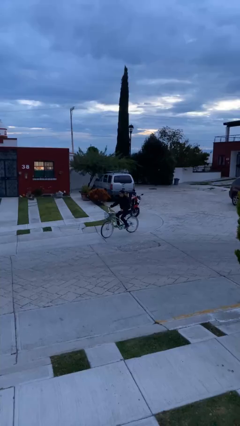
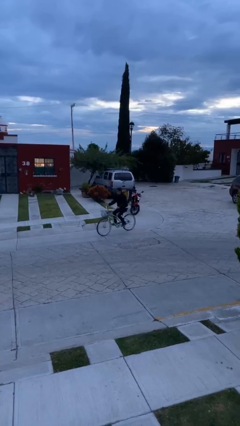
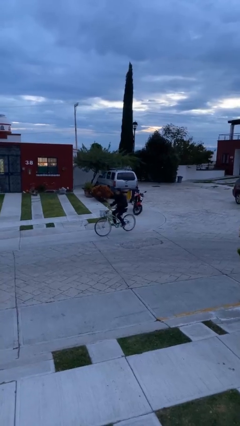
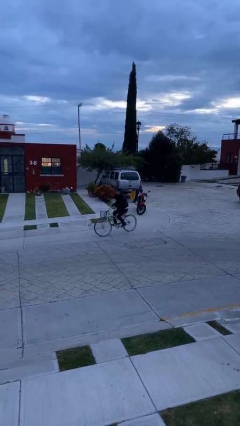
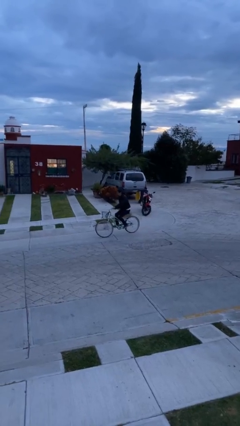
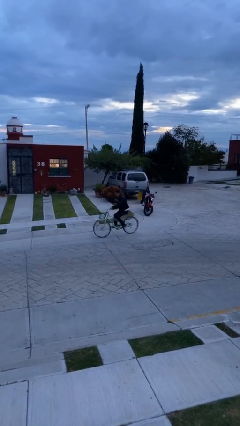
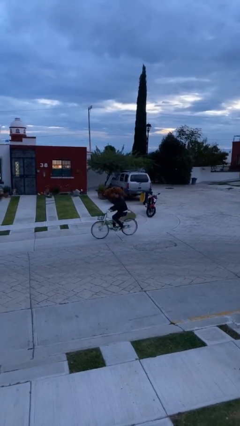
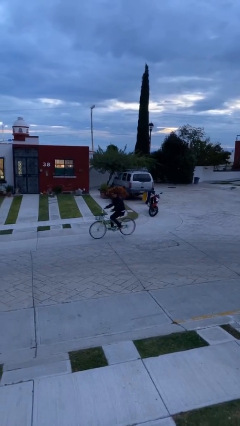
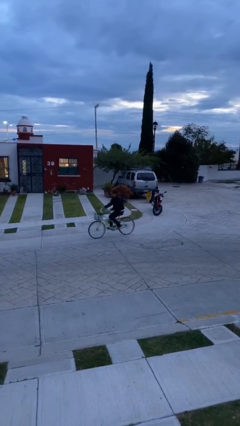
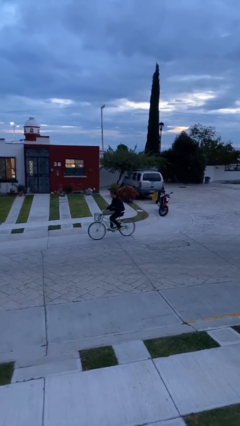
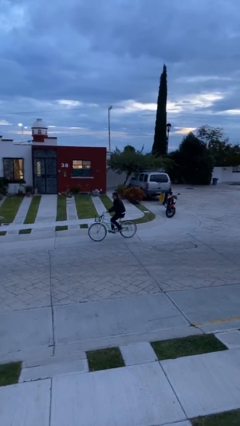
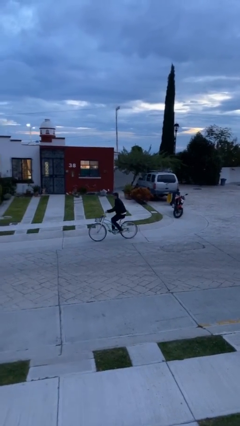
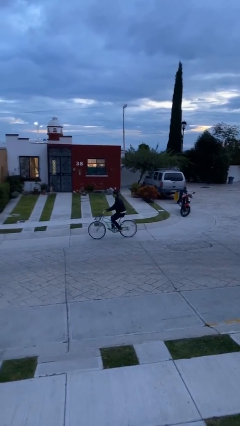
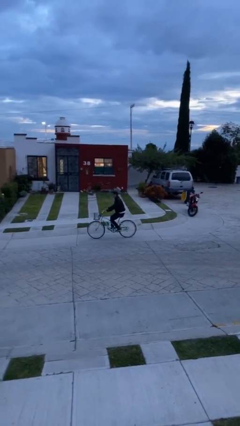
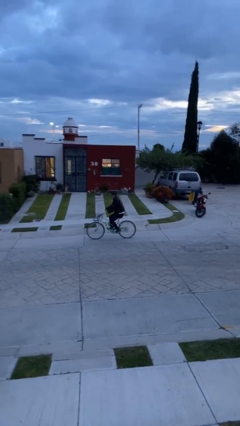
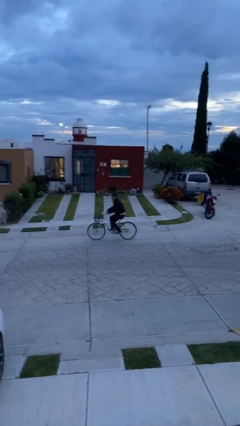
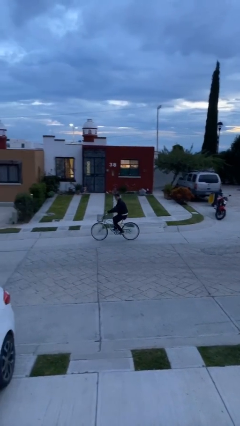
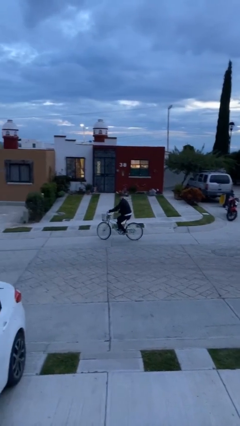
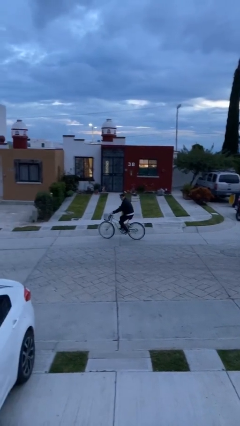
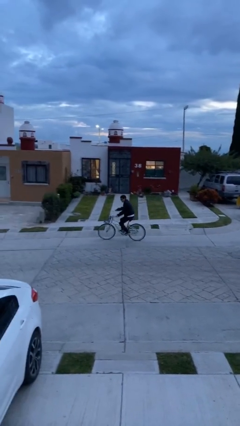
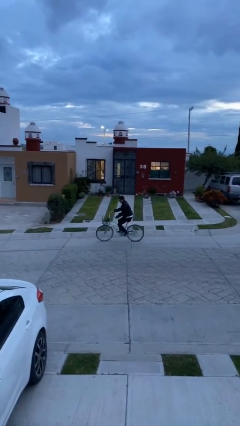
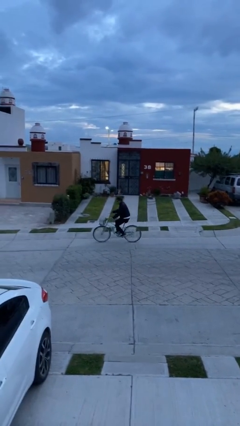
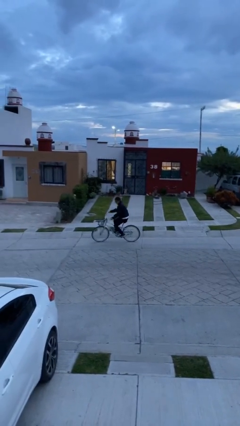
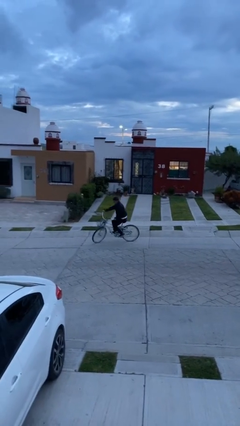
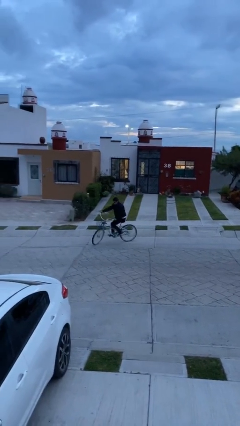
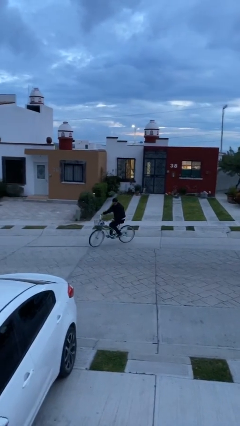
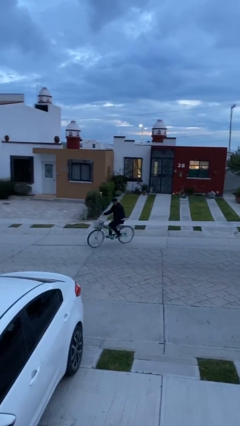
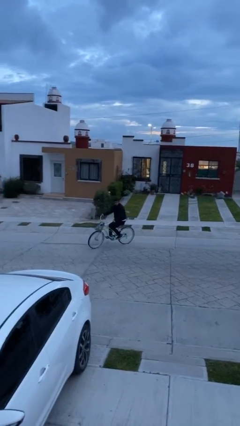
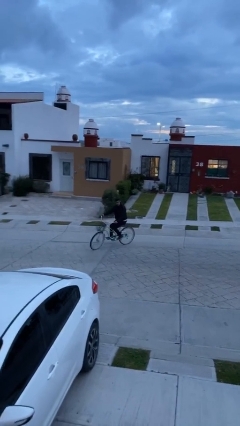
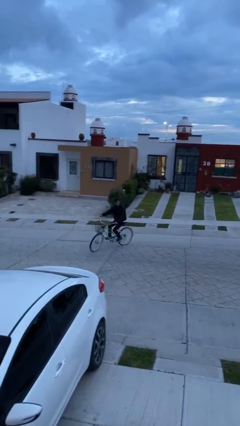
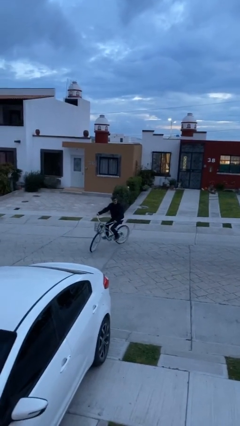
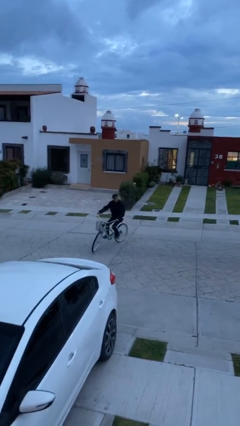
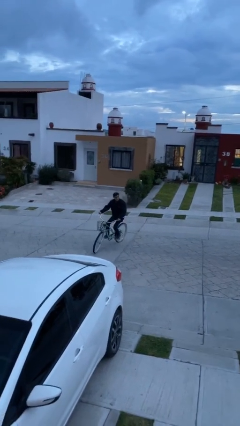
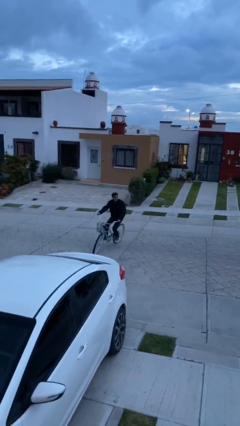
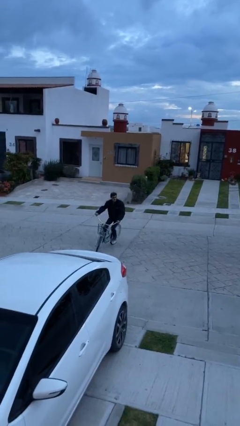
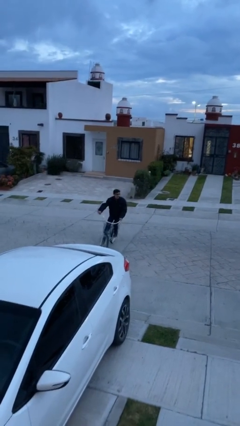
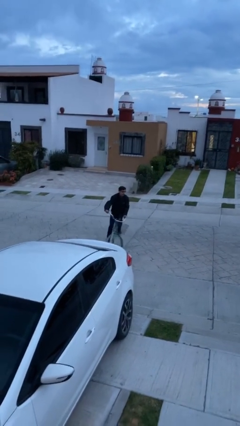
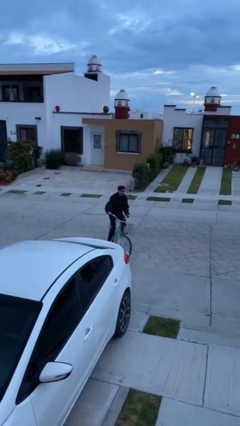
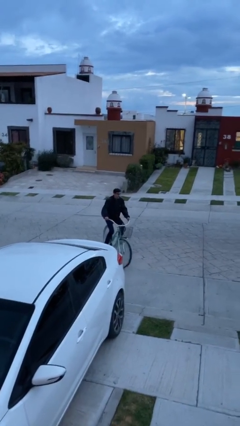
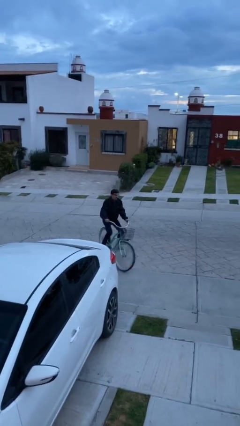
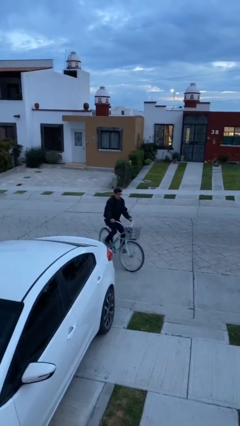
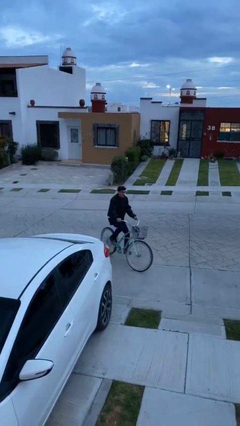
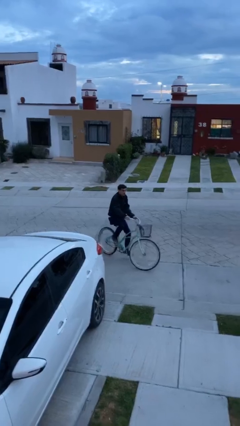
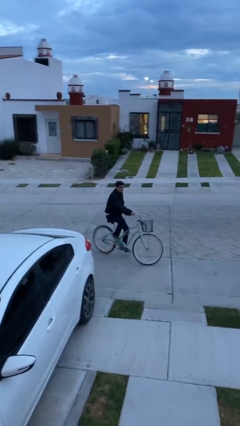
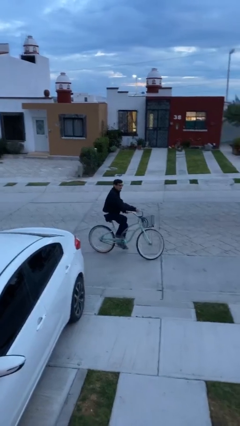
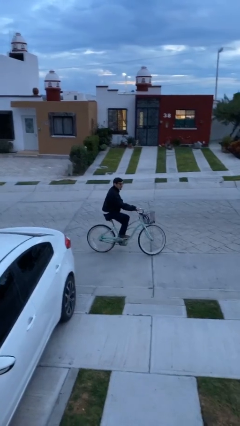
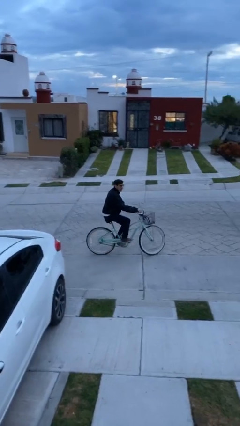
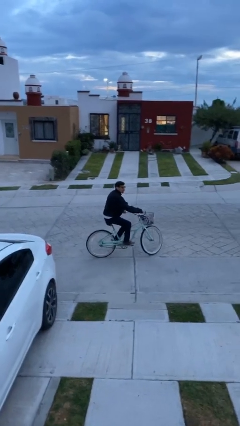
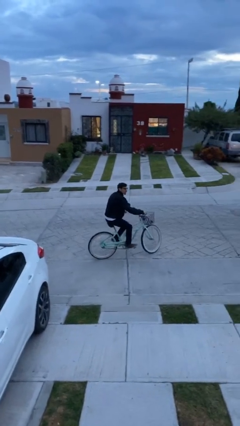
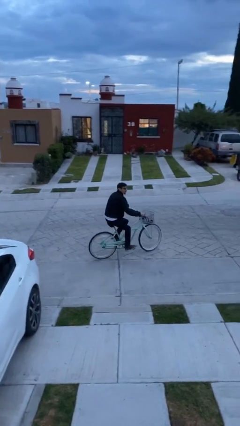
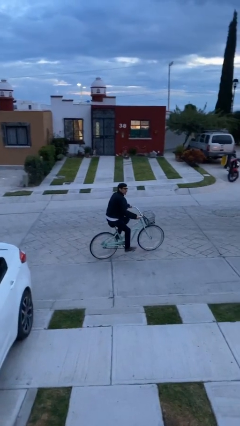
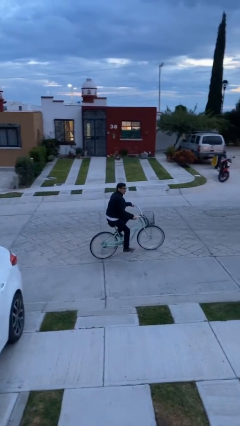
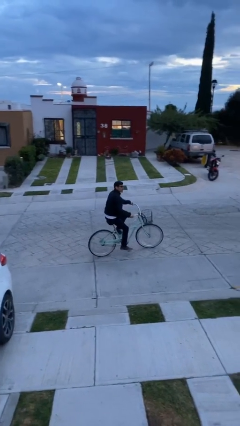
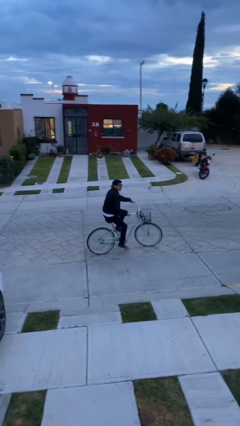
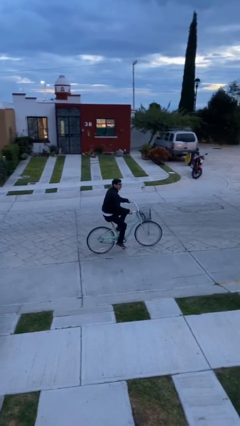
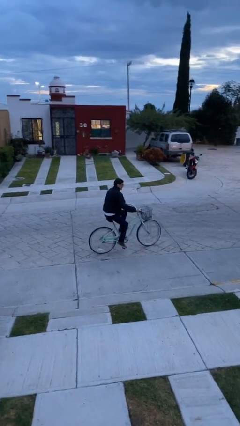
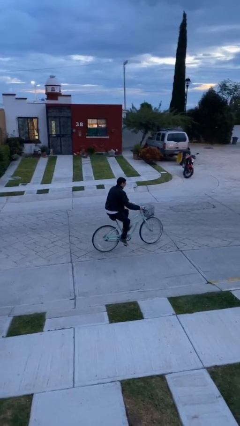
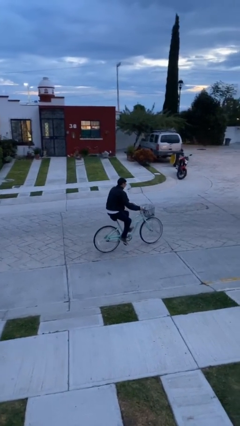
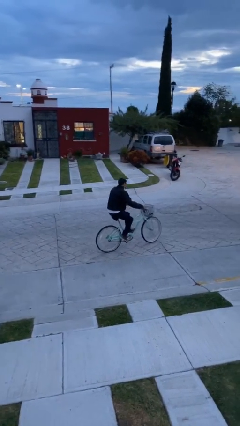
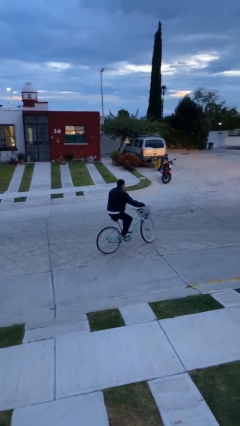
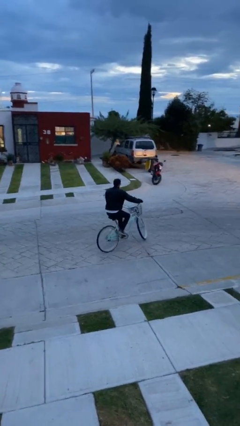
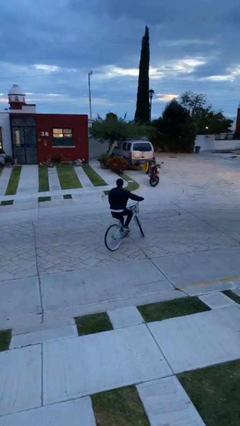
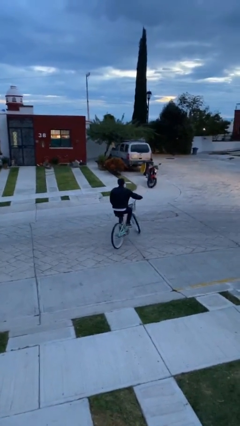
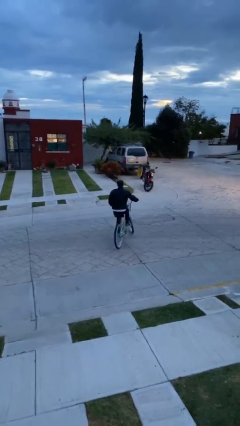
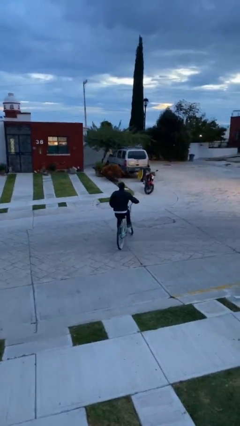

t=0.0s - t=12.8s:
person rides bicycle

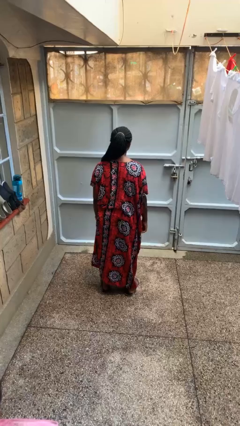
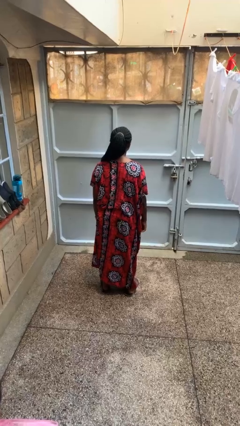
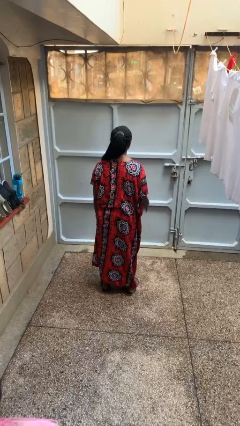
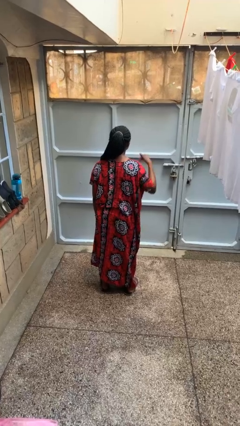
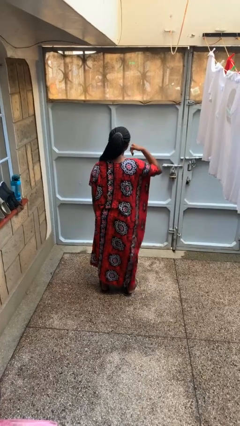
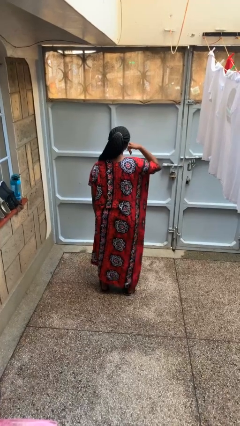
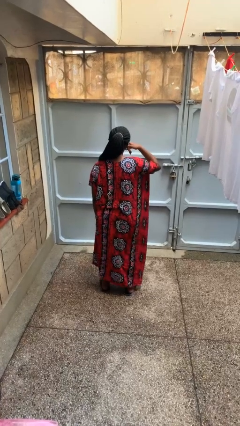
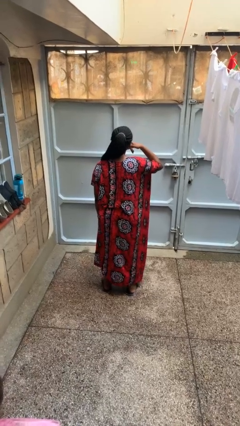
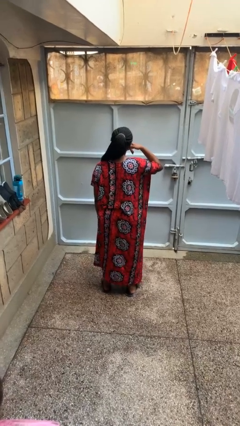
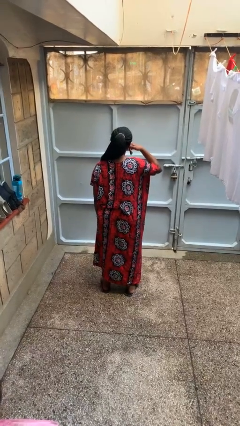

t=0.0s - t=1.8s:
person gestures call me

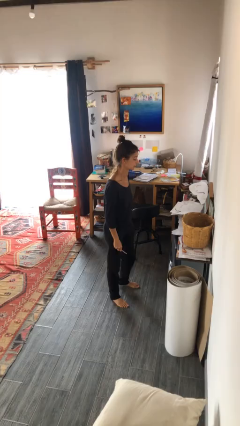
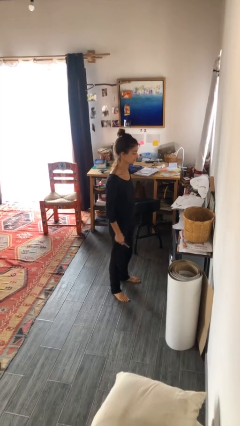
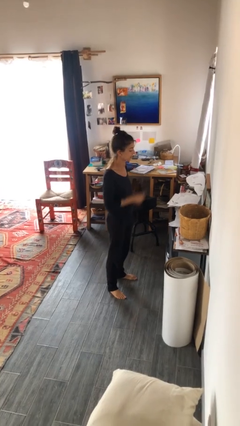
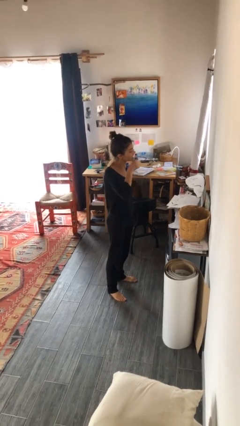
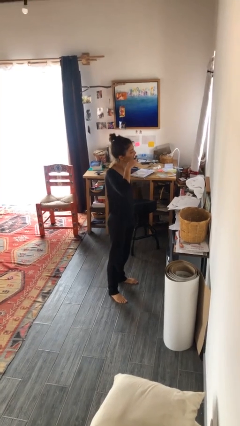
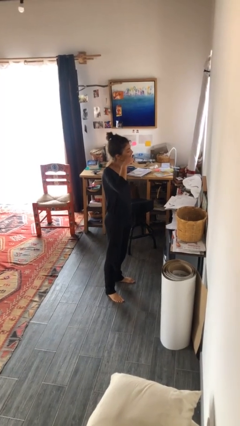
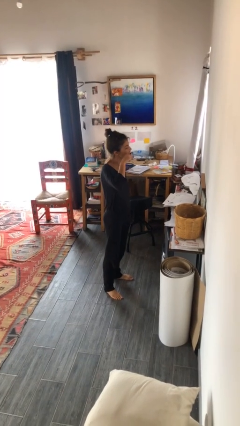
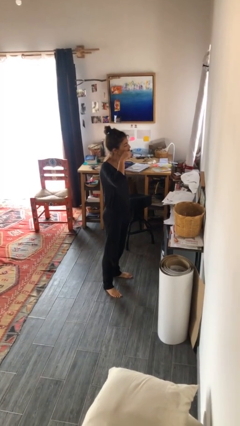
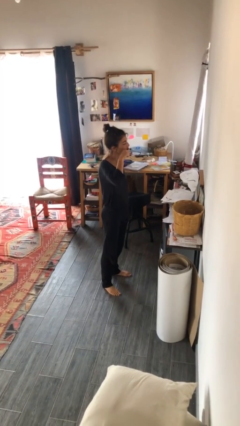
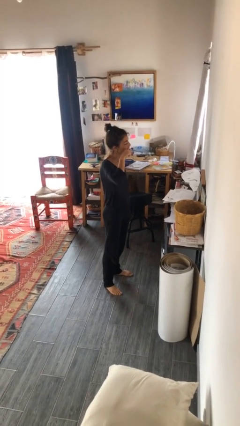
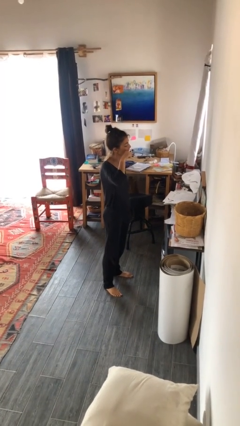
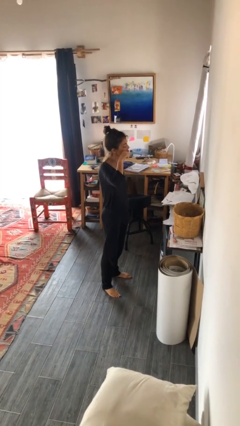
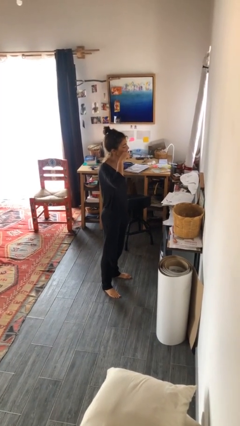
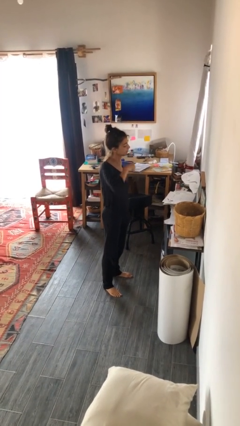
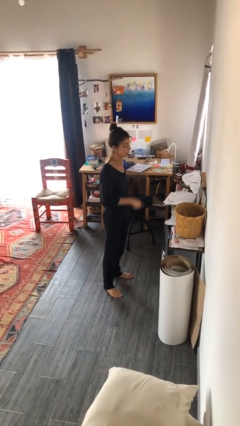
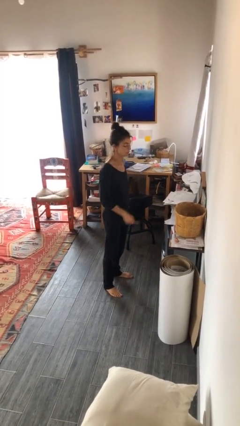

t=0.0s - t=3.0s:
person brushes teeth

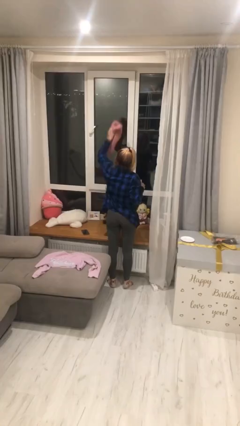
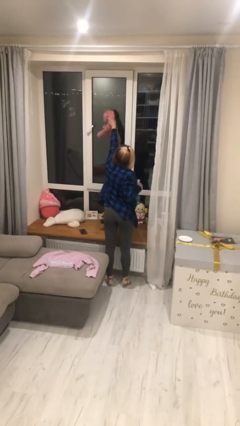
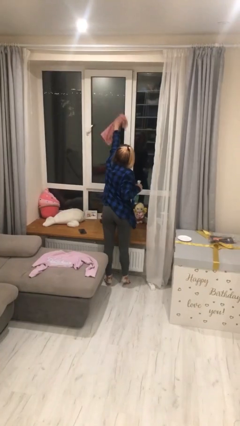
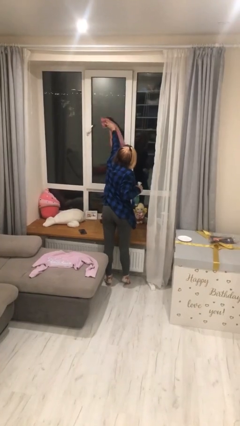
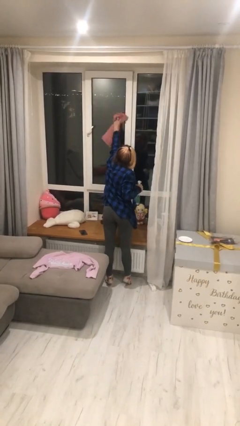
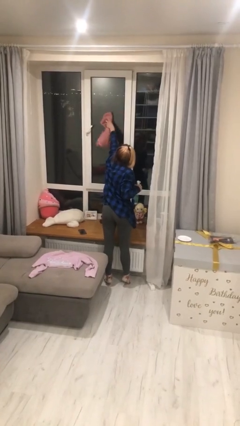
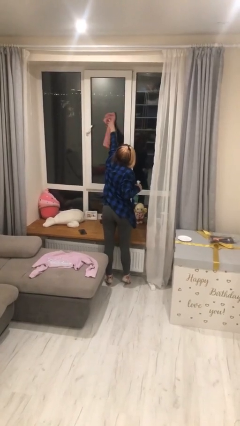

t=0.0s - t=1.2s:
person washes window
